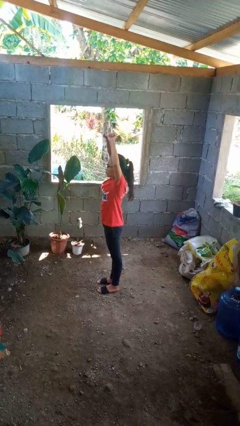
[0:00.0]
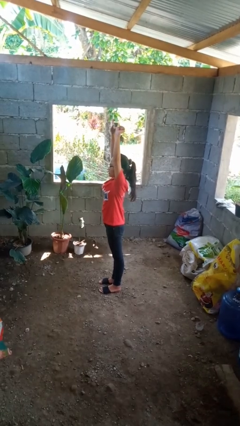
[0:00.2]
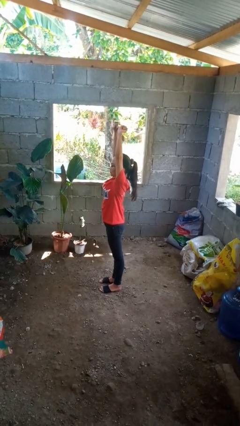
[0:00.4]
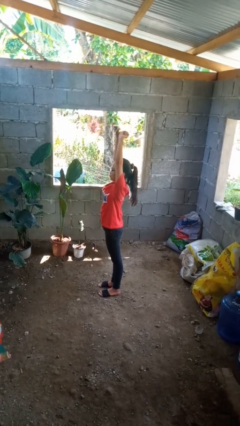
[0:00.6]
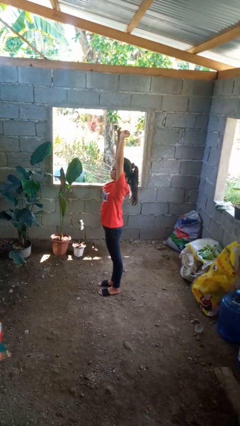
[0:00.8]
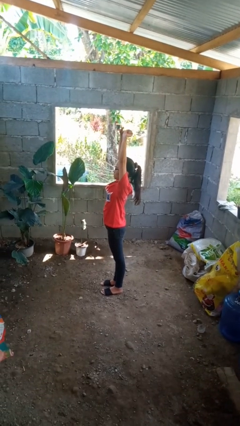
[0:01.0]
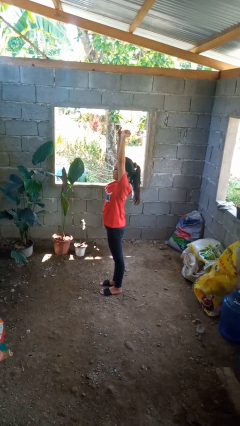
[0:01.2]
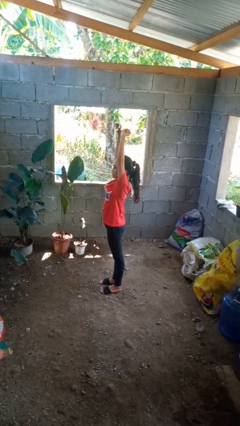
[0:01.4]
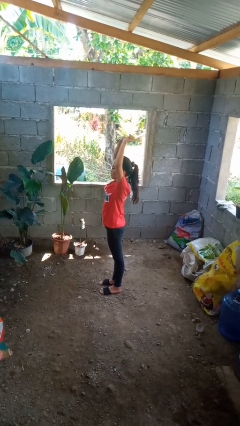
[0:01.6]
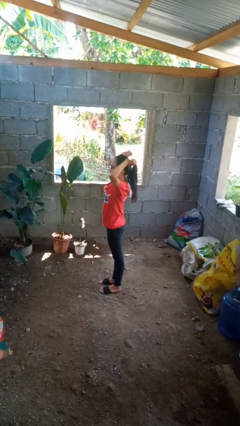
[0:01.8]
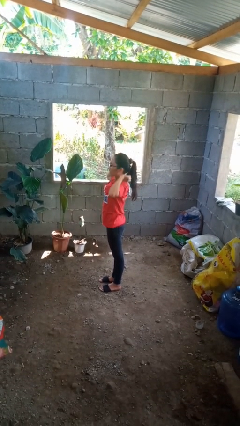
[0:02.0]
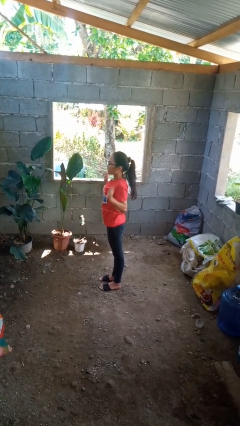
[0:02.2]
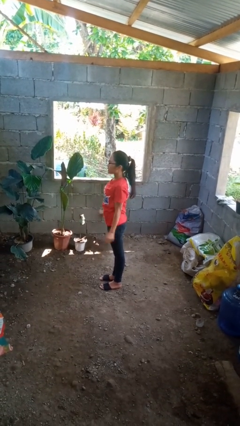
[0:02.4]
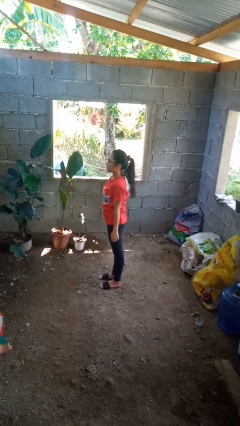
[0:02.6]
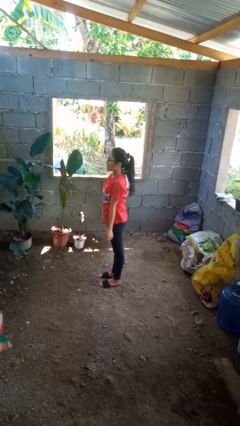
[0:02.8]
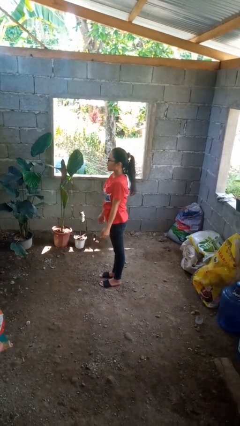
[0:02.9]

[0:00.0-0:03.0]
person stretches arms over head

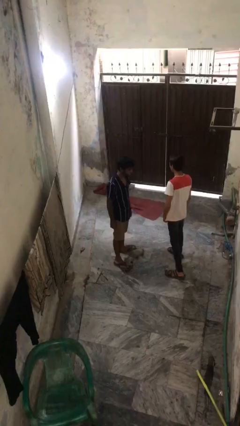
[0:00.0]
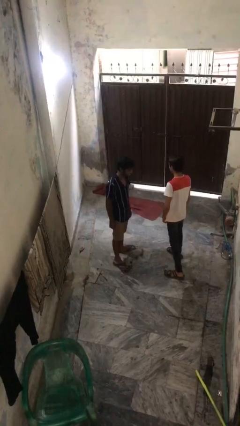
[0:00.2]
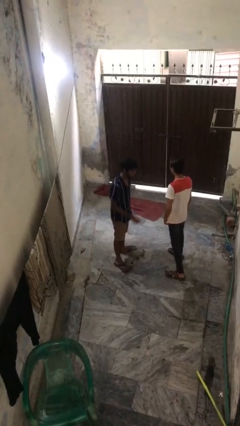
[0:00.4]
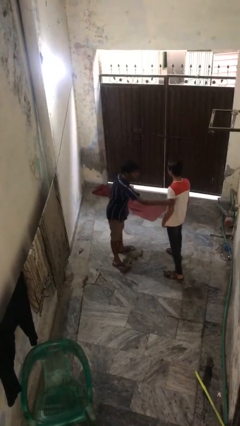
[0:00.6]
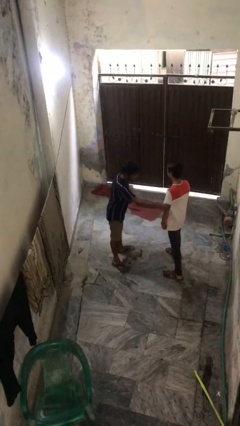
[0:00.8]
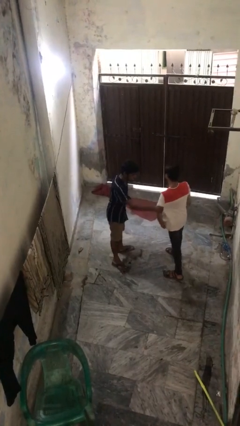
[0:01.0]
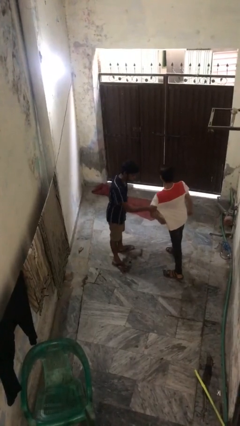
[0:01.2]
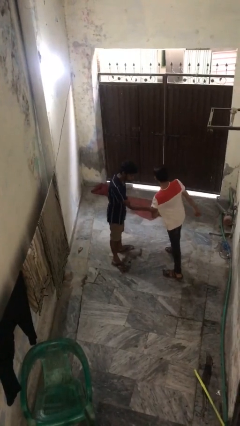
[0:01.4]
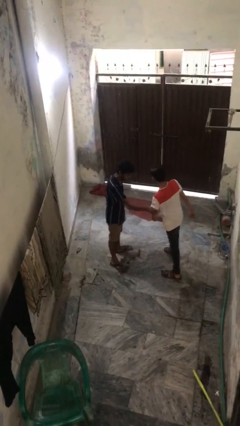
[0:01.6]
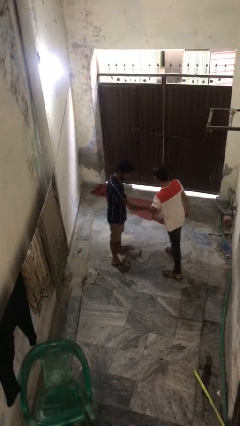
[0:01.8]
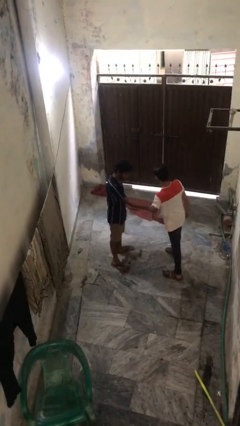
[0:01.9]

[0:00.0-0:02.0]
person grabs person by bicep

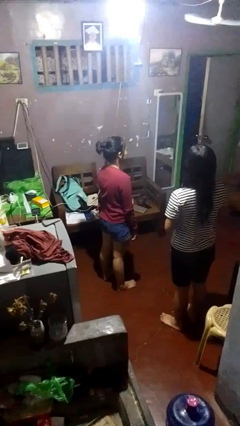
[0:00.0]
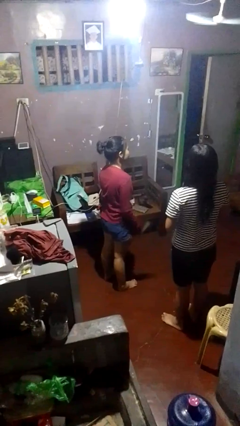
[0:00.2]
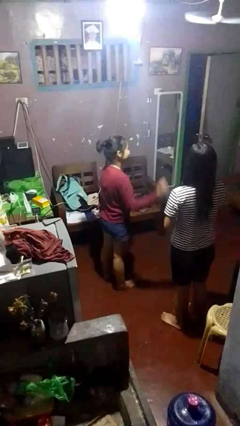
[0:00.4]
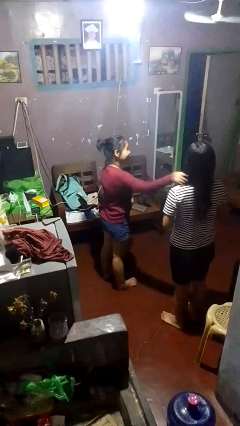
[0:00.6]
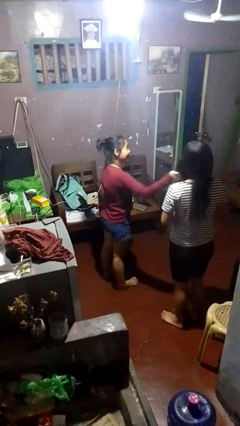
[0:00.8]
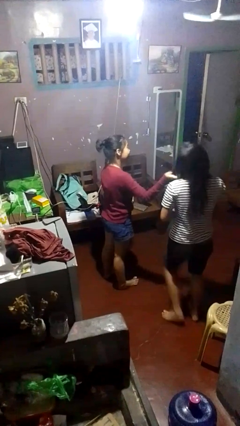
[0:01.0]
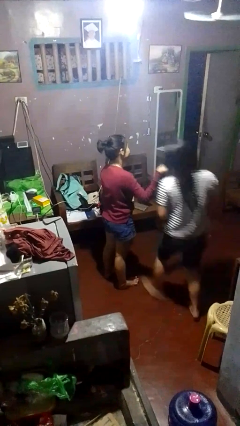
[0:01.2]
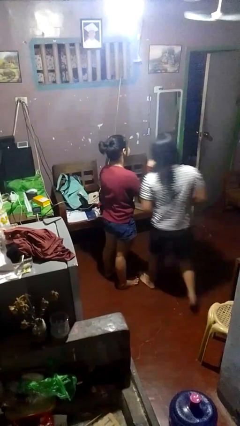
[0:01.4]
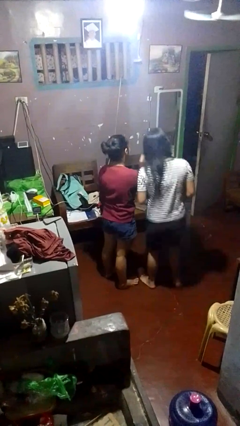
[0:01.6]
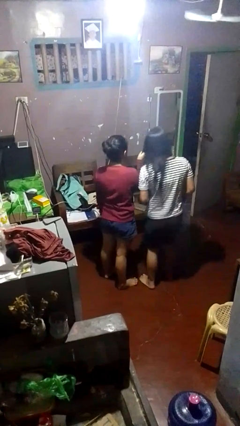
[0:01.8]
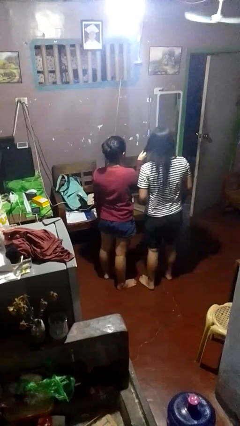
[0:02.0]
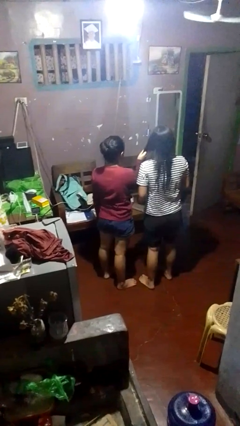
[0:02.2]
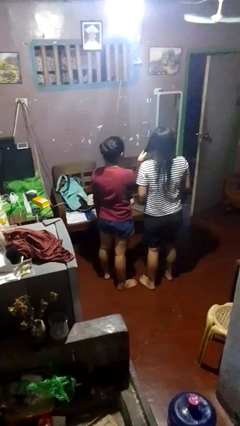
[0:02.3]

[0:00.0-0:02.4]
person grabs person by hair

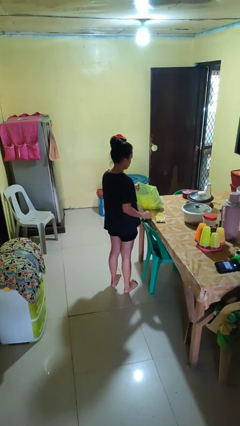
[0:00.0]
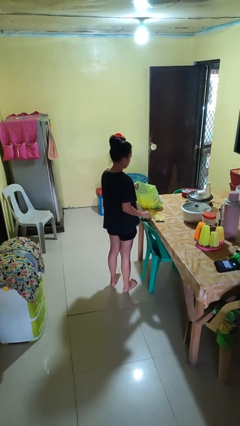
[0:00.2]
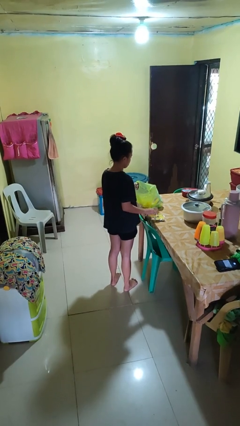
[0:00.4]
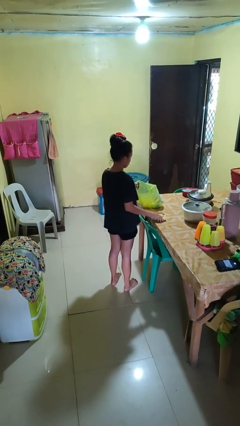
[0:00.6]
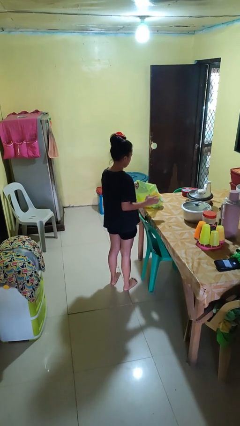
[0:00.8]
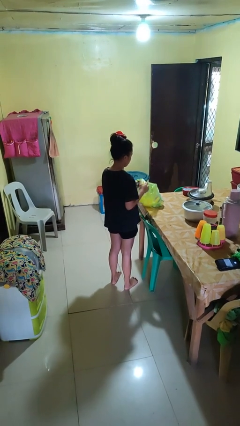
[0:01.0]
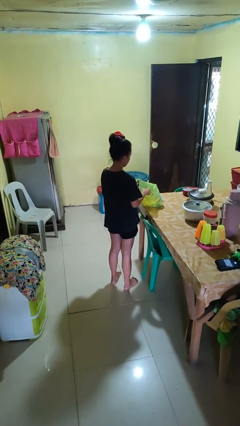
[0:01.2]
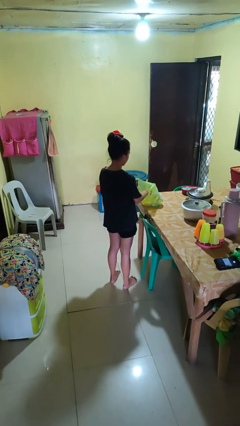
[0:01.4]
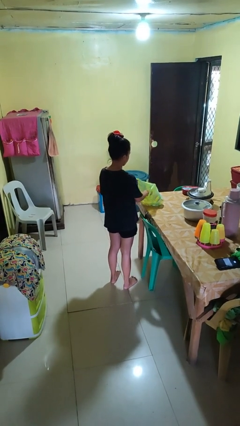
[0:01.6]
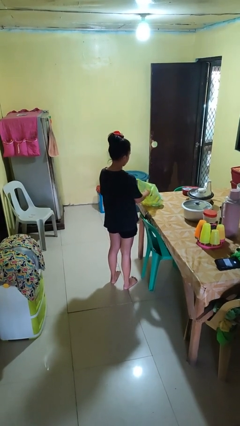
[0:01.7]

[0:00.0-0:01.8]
person puts object into bag

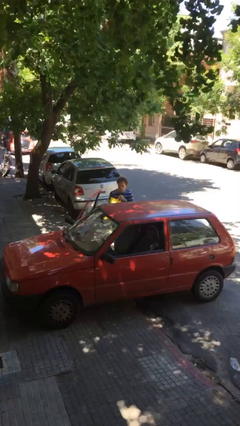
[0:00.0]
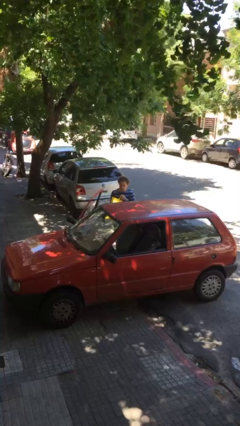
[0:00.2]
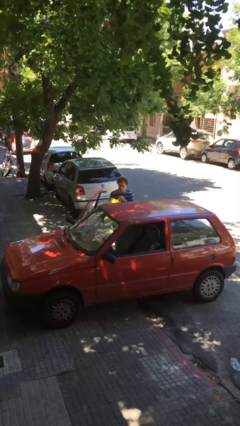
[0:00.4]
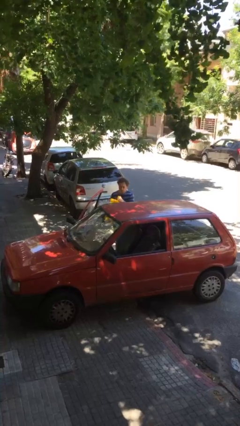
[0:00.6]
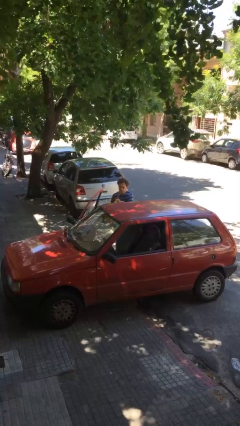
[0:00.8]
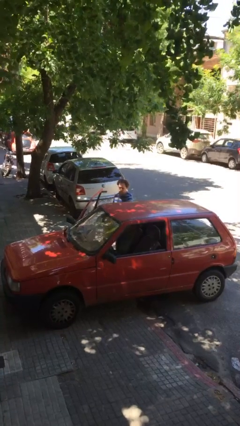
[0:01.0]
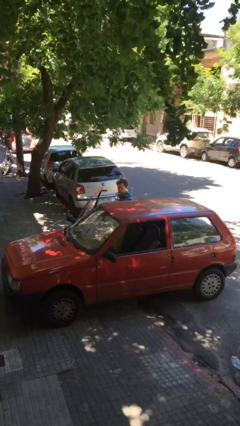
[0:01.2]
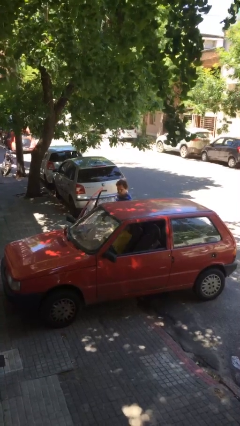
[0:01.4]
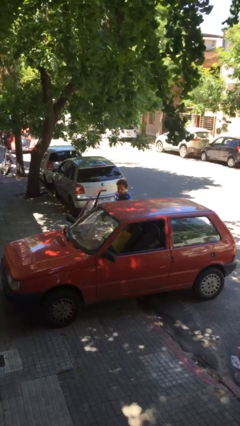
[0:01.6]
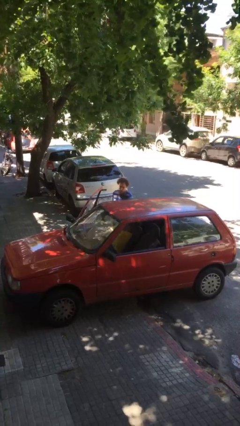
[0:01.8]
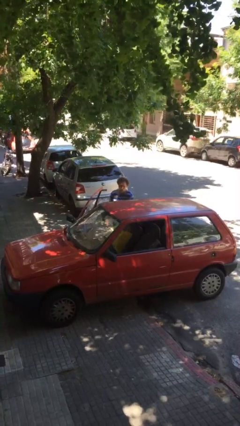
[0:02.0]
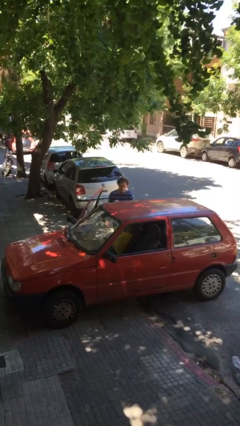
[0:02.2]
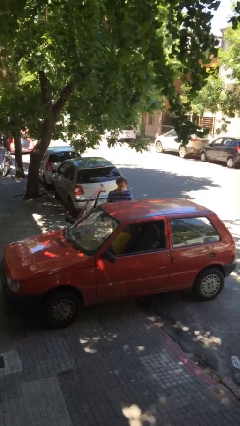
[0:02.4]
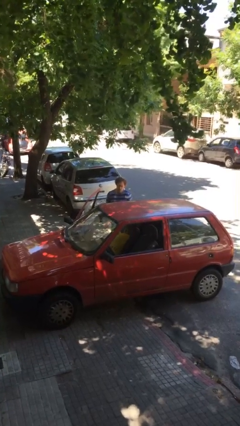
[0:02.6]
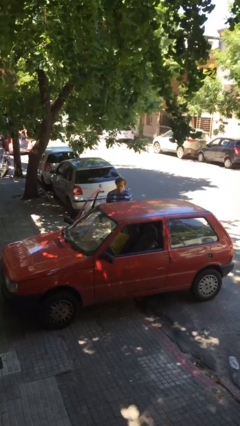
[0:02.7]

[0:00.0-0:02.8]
person loads car

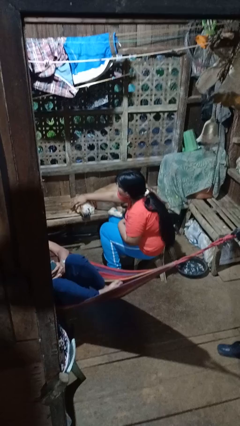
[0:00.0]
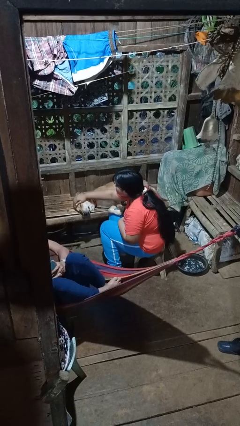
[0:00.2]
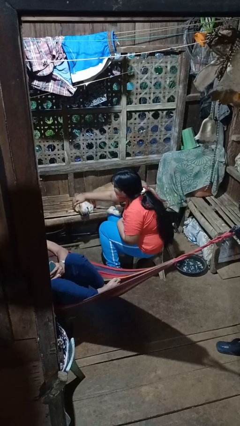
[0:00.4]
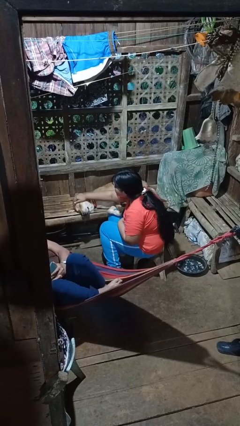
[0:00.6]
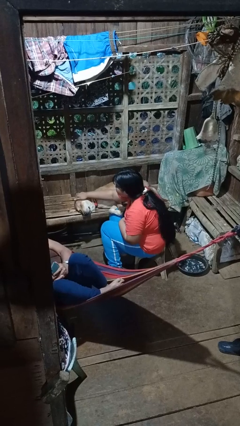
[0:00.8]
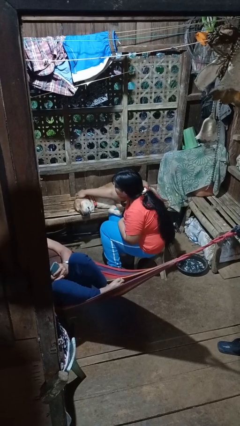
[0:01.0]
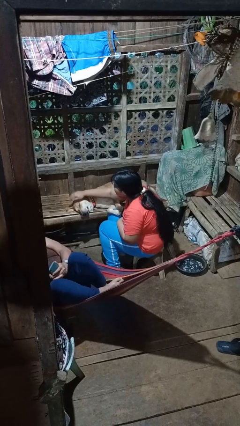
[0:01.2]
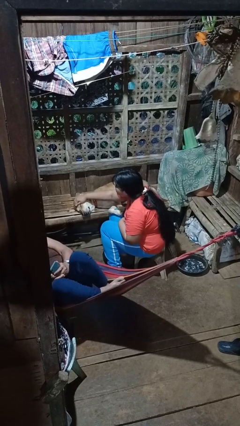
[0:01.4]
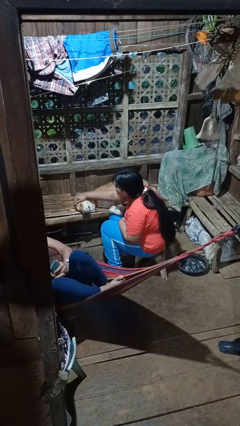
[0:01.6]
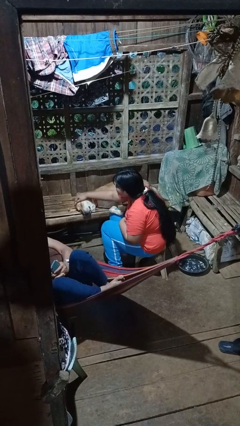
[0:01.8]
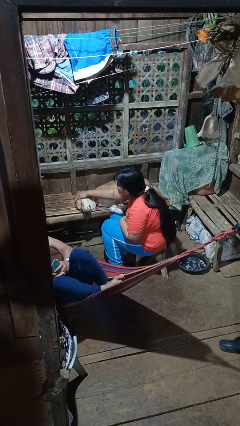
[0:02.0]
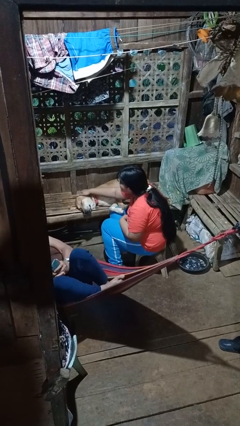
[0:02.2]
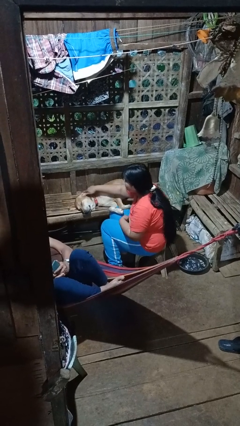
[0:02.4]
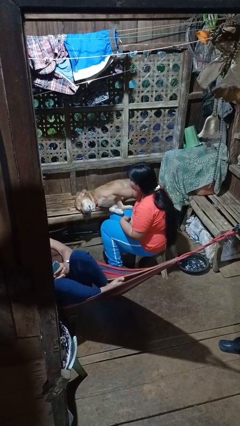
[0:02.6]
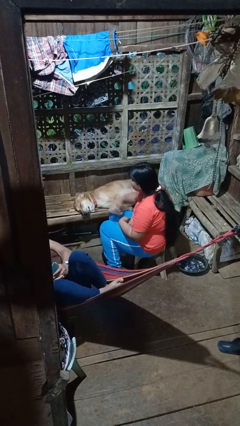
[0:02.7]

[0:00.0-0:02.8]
person pets dog

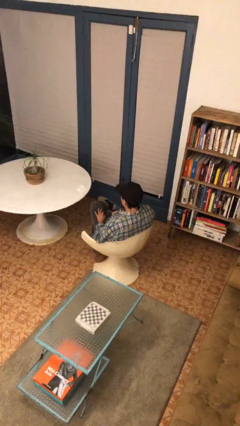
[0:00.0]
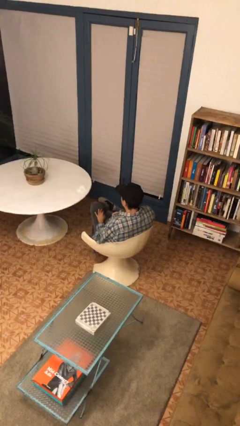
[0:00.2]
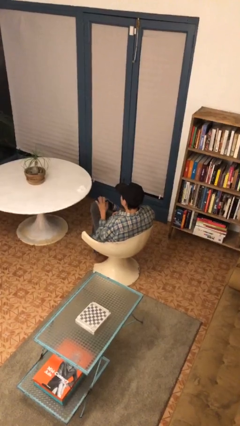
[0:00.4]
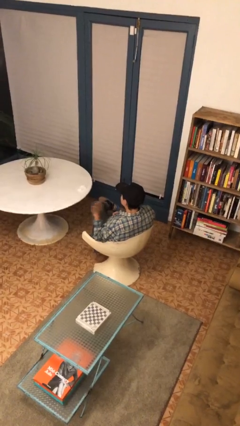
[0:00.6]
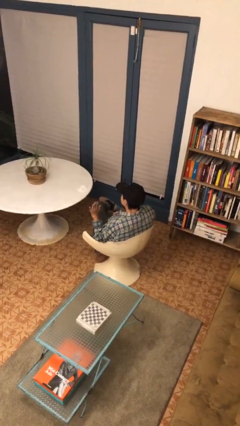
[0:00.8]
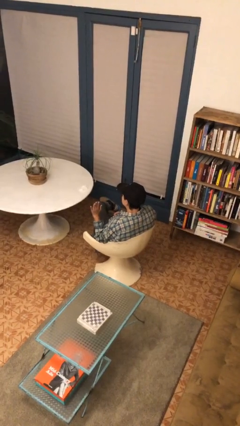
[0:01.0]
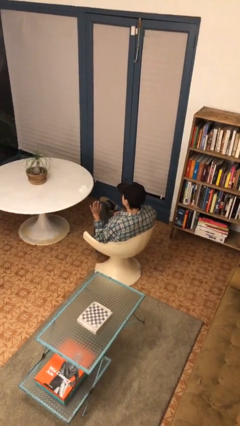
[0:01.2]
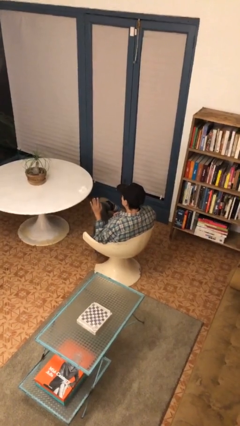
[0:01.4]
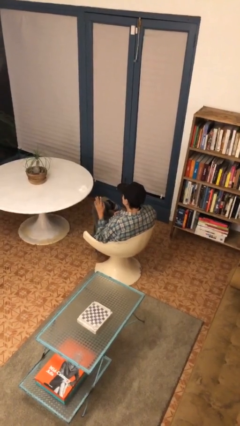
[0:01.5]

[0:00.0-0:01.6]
person gestures stop

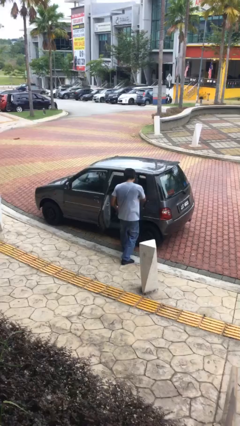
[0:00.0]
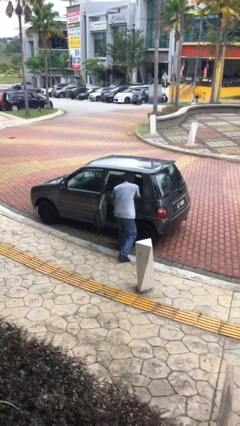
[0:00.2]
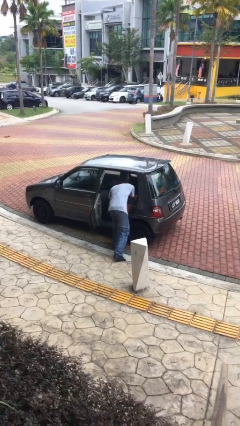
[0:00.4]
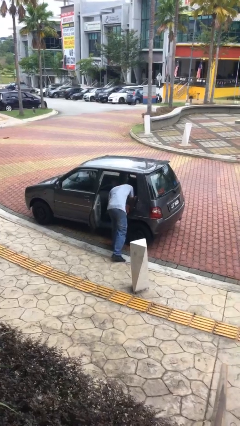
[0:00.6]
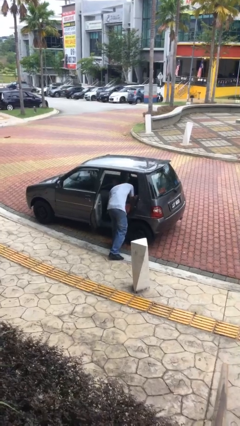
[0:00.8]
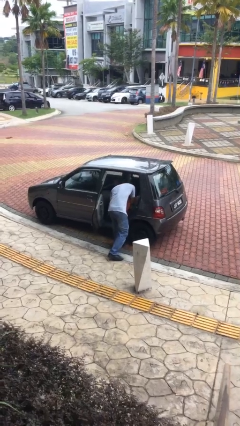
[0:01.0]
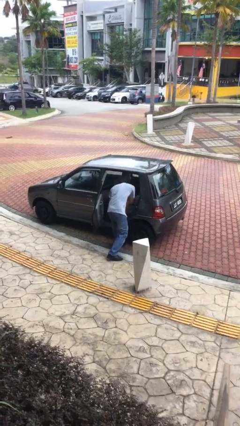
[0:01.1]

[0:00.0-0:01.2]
person unloads car
